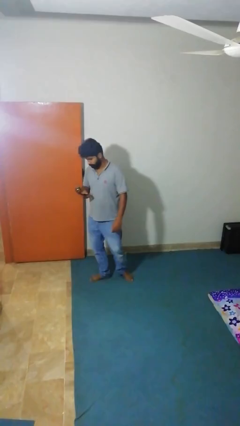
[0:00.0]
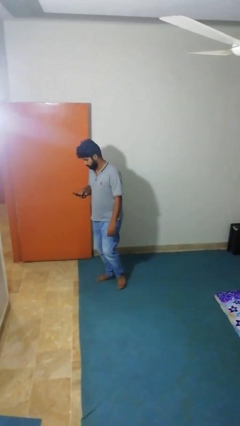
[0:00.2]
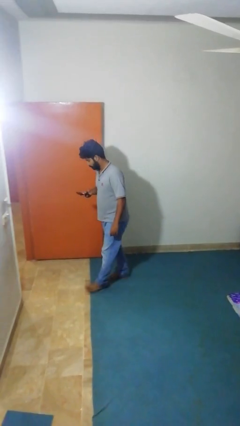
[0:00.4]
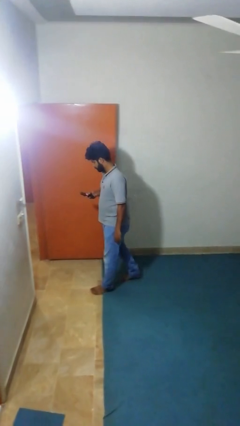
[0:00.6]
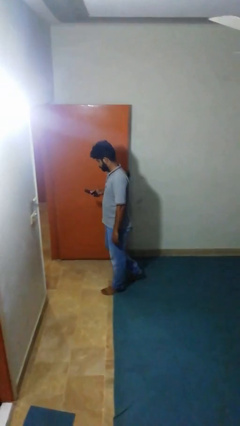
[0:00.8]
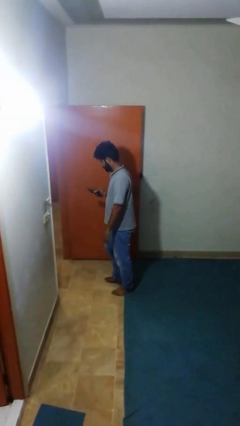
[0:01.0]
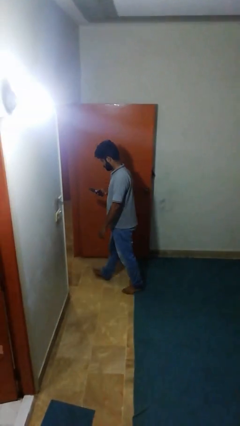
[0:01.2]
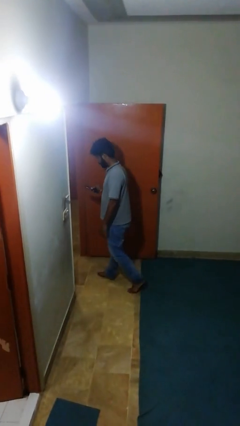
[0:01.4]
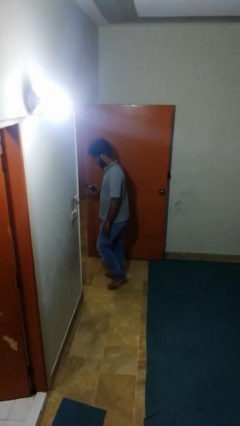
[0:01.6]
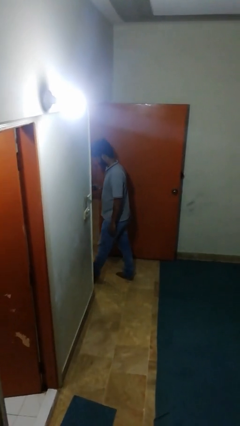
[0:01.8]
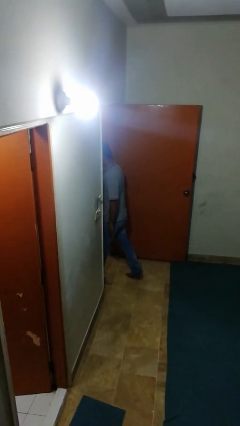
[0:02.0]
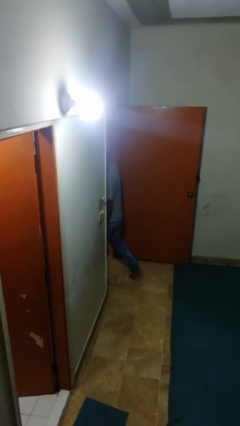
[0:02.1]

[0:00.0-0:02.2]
person exits scene through structure

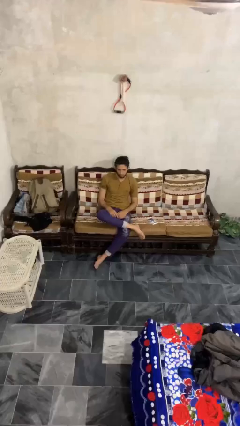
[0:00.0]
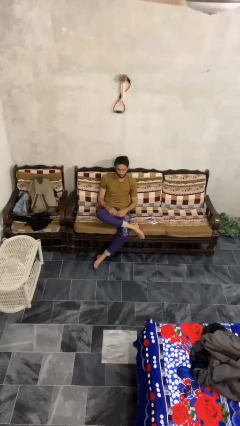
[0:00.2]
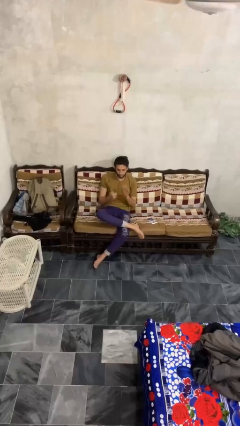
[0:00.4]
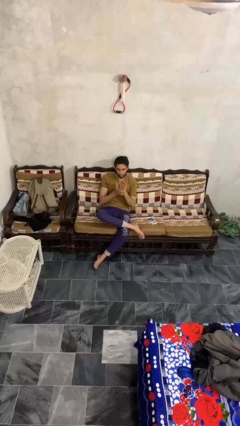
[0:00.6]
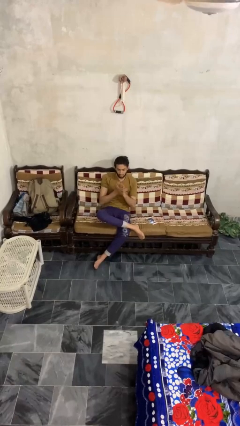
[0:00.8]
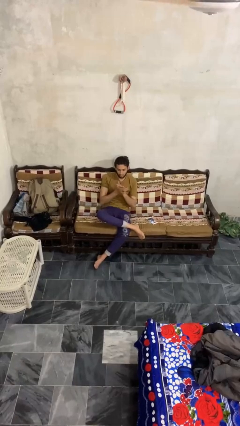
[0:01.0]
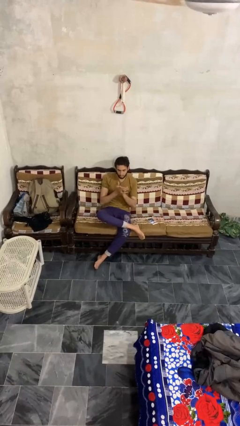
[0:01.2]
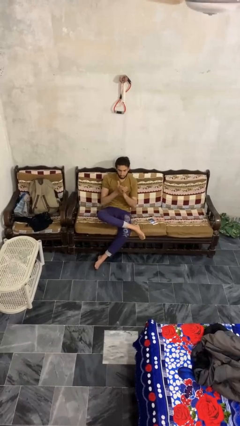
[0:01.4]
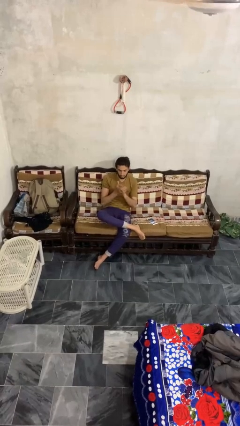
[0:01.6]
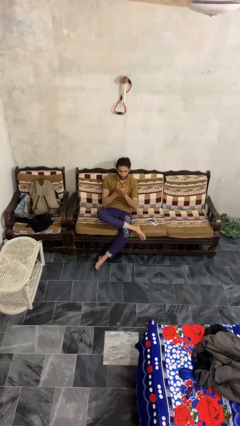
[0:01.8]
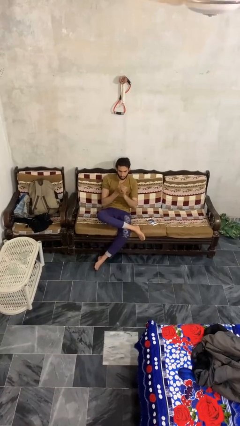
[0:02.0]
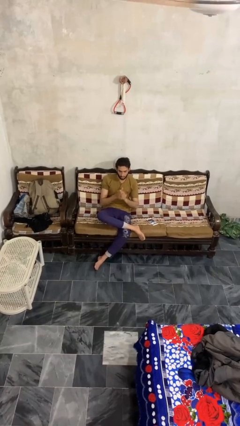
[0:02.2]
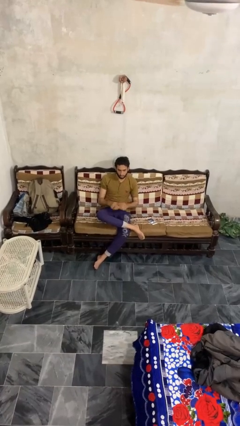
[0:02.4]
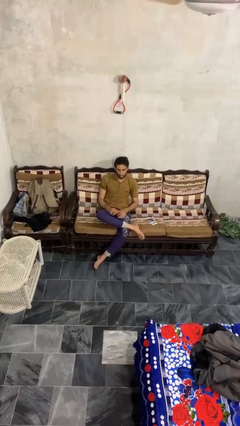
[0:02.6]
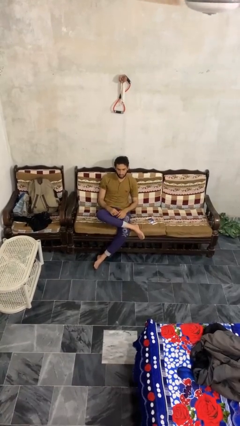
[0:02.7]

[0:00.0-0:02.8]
person claps hands

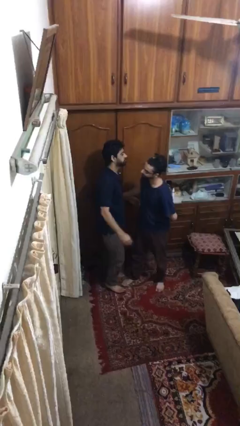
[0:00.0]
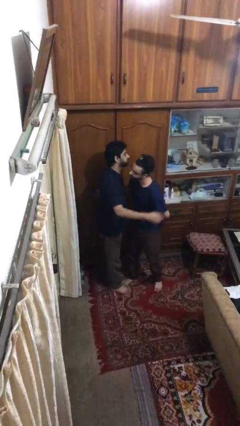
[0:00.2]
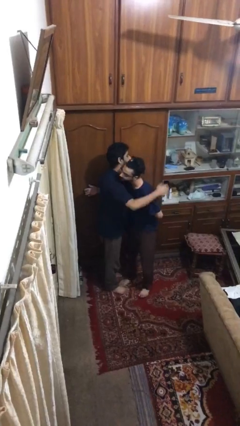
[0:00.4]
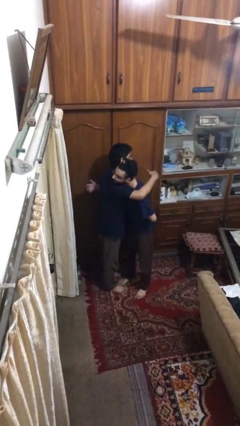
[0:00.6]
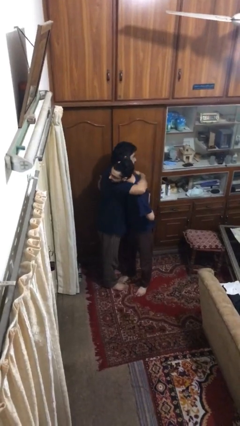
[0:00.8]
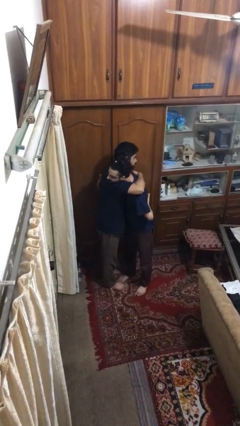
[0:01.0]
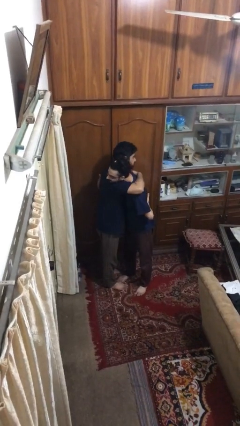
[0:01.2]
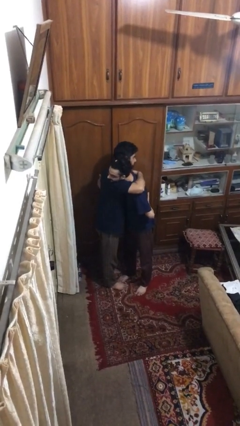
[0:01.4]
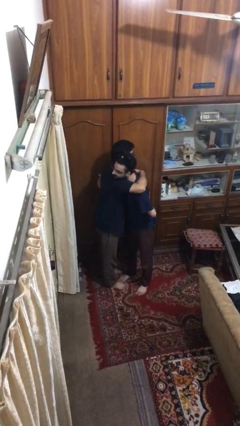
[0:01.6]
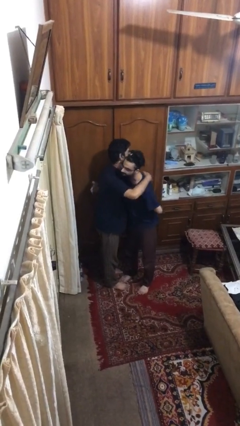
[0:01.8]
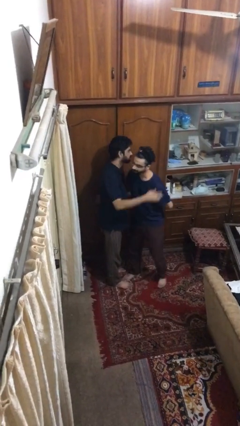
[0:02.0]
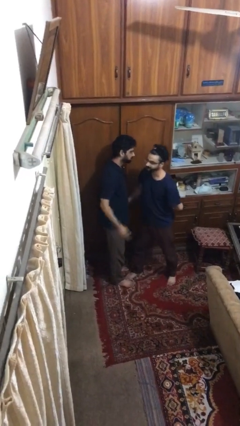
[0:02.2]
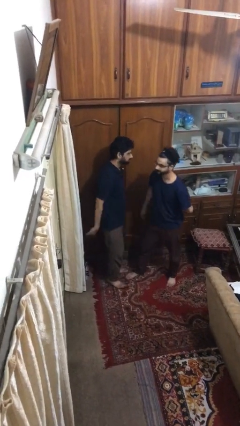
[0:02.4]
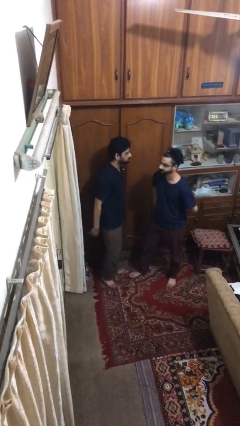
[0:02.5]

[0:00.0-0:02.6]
person embraces person

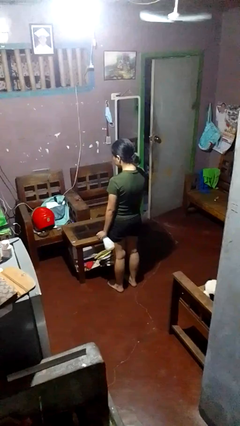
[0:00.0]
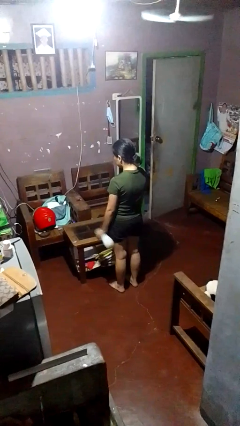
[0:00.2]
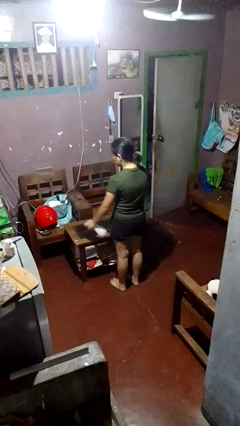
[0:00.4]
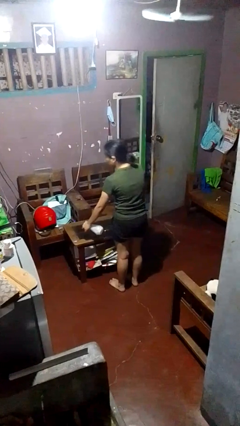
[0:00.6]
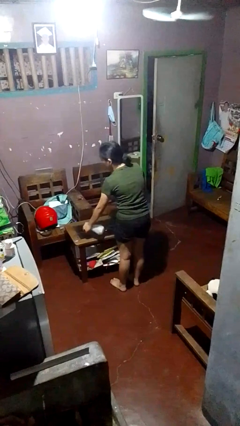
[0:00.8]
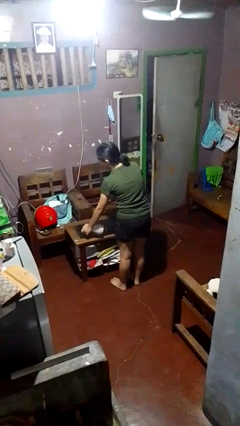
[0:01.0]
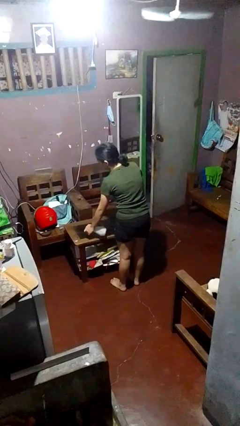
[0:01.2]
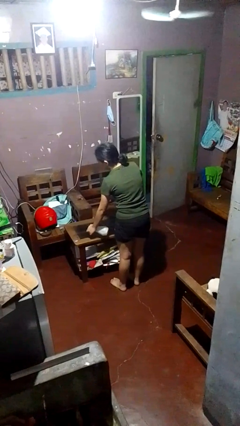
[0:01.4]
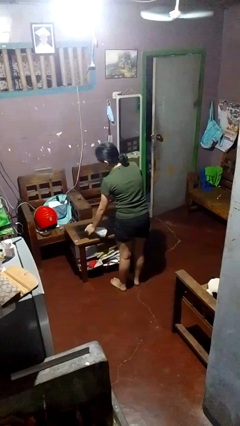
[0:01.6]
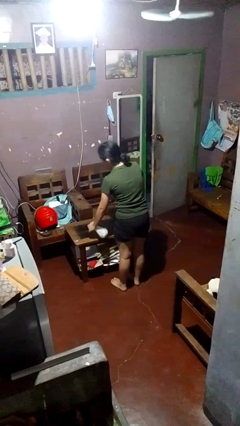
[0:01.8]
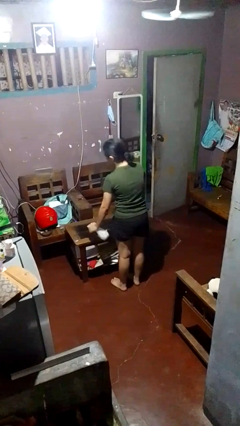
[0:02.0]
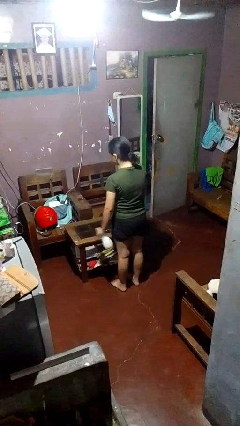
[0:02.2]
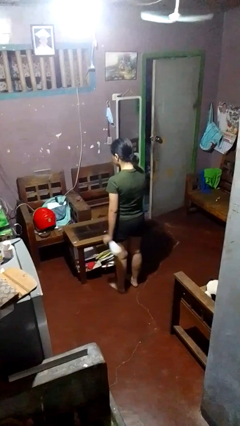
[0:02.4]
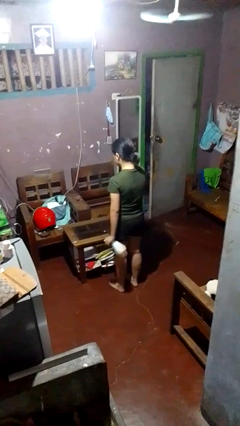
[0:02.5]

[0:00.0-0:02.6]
person sprays from bottle

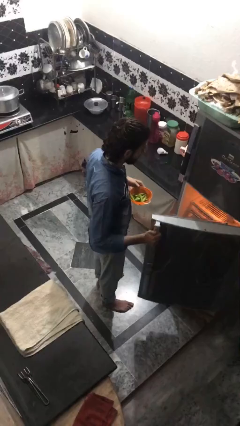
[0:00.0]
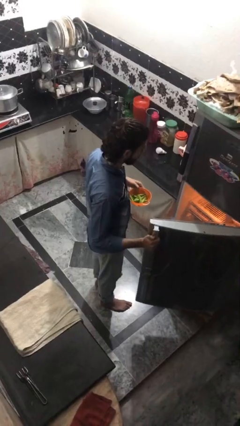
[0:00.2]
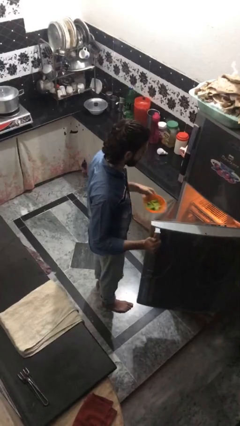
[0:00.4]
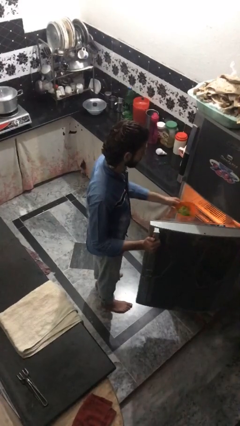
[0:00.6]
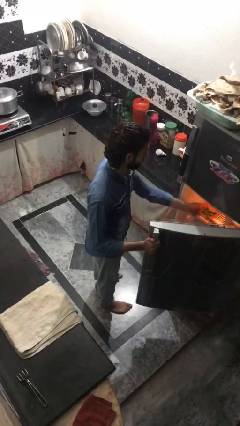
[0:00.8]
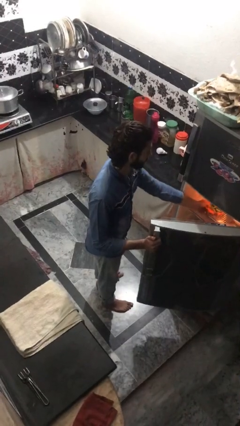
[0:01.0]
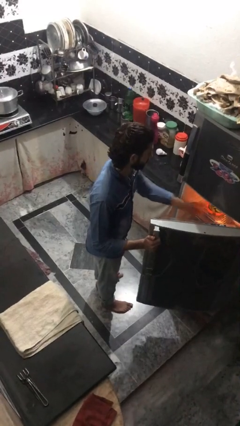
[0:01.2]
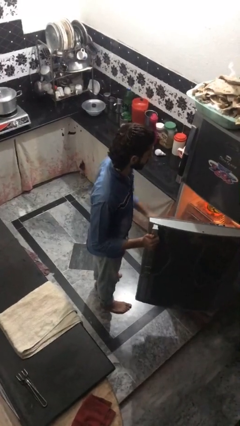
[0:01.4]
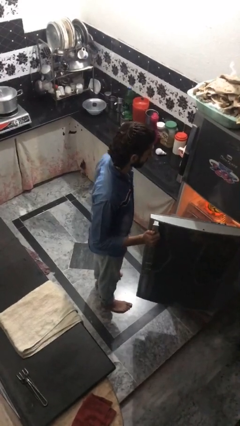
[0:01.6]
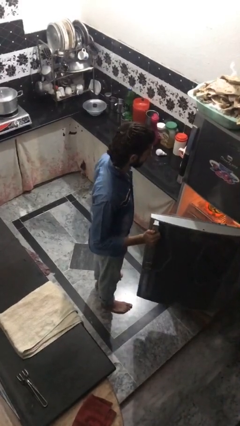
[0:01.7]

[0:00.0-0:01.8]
person puts object into refrigerator

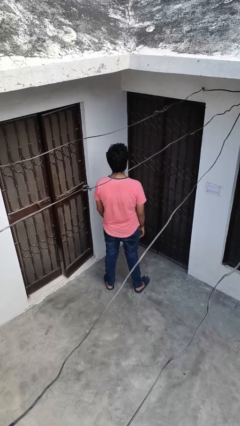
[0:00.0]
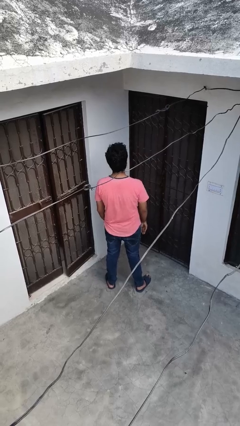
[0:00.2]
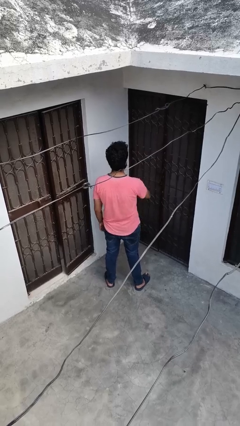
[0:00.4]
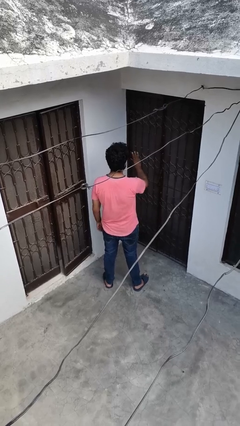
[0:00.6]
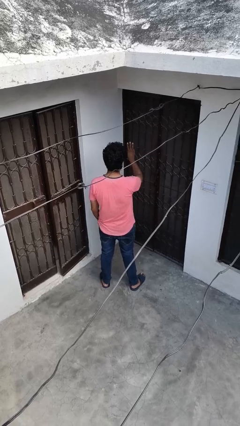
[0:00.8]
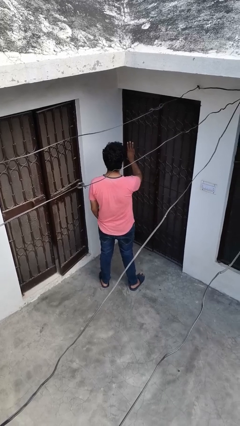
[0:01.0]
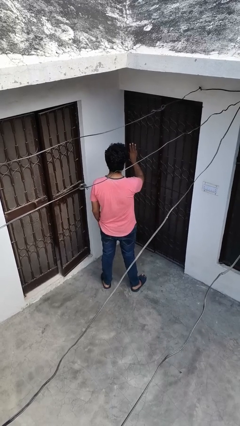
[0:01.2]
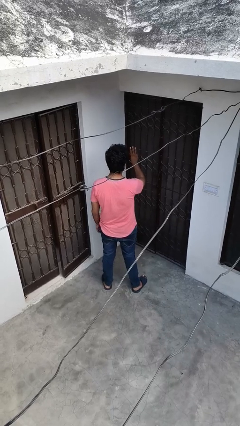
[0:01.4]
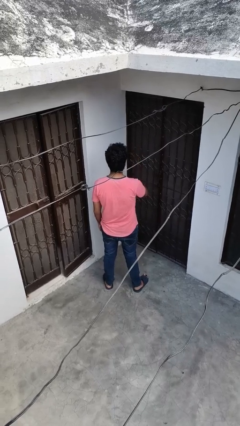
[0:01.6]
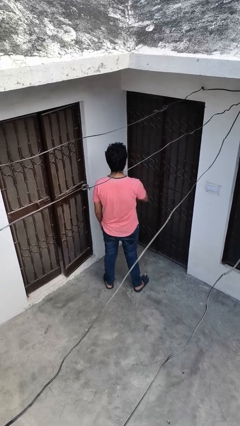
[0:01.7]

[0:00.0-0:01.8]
person gestures number three

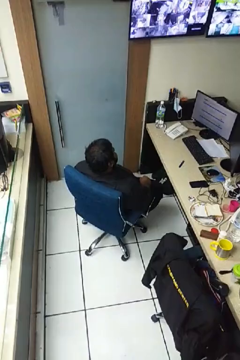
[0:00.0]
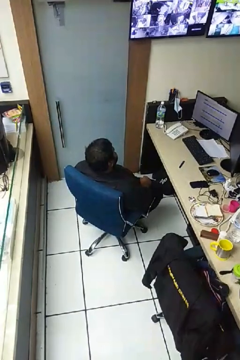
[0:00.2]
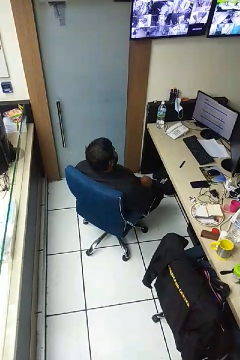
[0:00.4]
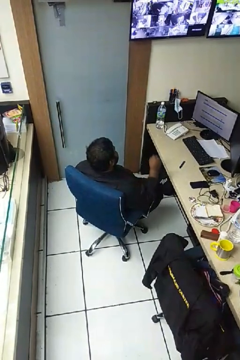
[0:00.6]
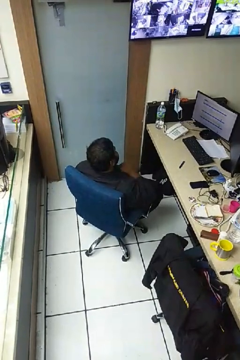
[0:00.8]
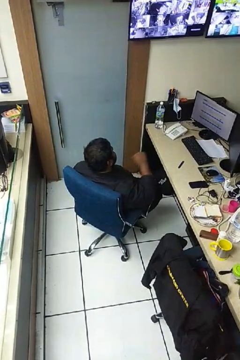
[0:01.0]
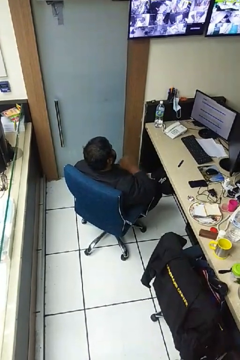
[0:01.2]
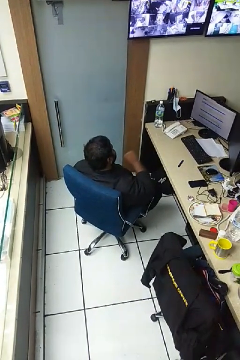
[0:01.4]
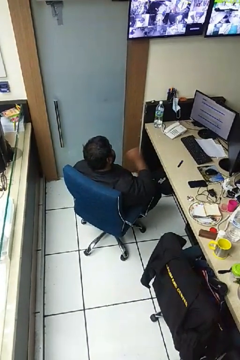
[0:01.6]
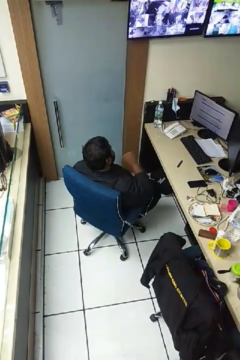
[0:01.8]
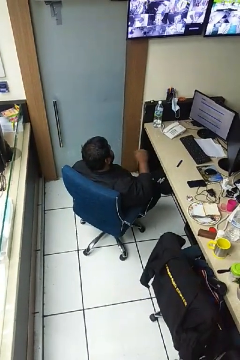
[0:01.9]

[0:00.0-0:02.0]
person drums on chest

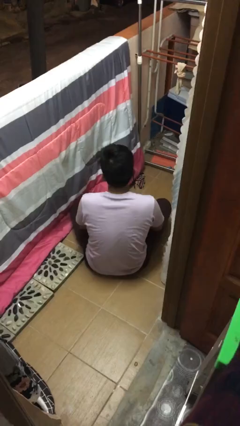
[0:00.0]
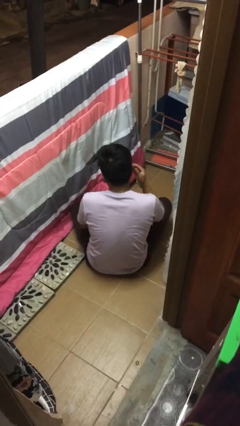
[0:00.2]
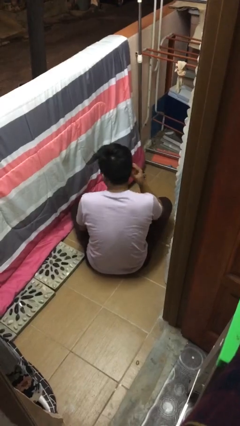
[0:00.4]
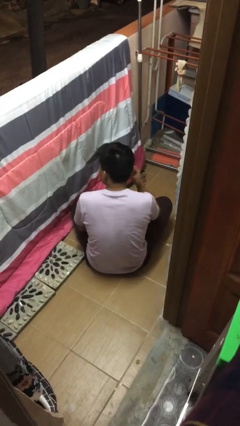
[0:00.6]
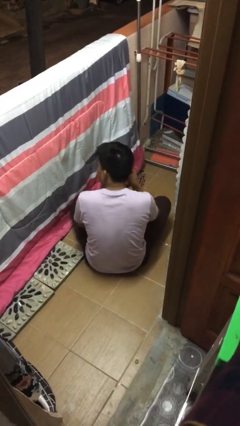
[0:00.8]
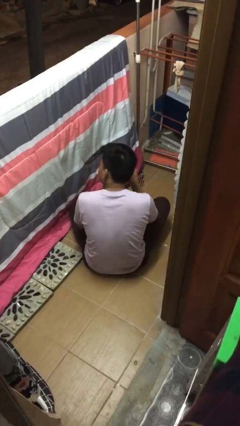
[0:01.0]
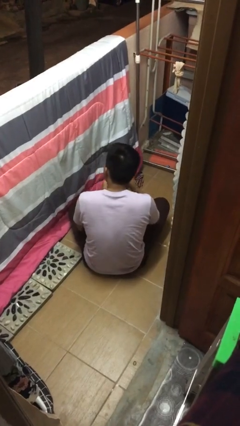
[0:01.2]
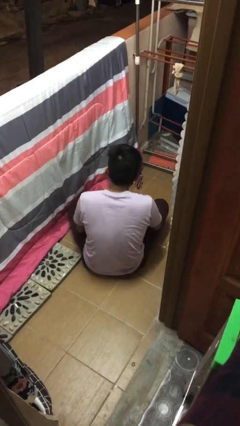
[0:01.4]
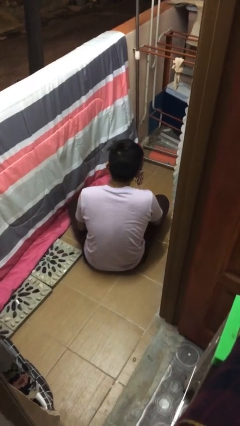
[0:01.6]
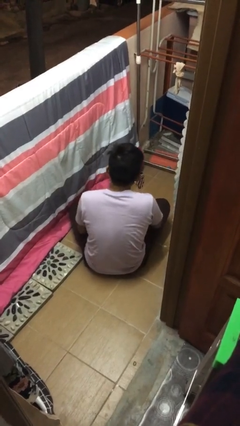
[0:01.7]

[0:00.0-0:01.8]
person takes off earrings
